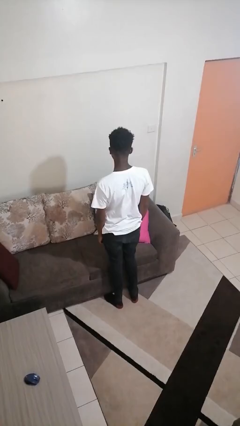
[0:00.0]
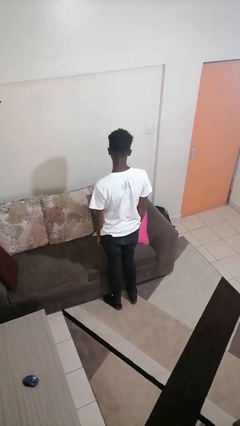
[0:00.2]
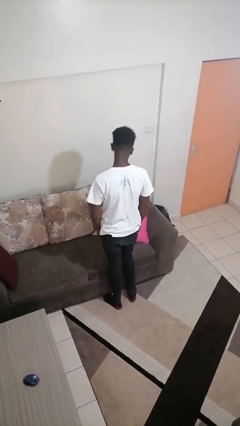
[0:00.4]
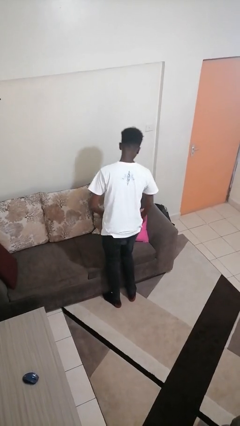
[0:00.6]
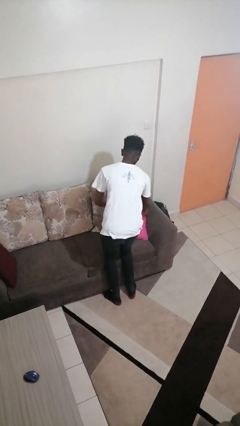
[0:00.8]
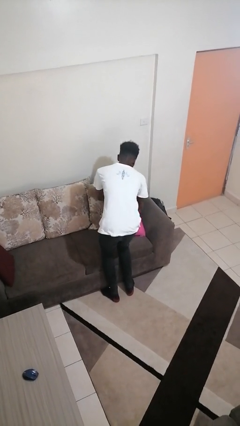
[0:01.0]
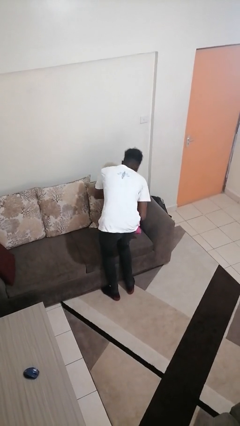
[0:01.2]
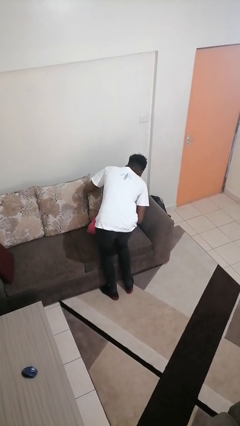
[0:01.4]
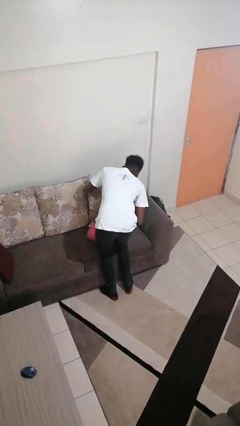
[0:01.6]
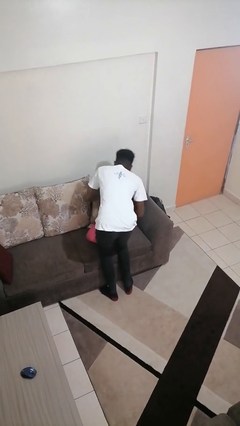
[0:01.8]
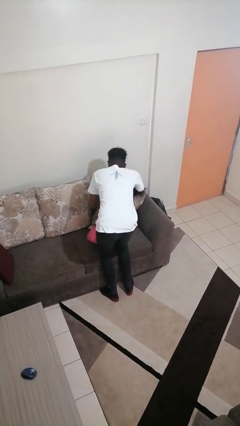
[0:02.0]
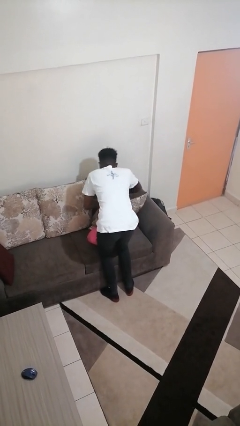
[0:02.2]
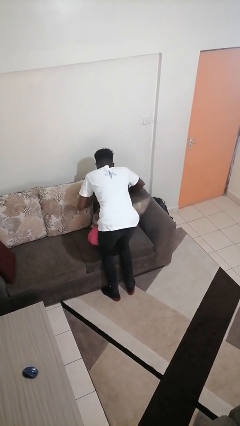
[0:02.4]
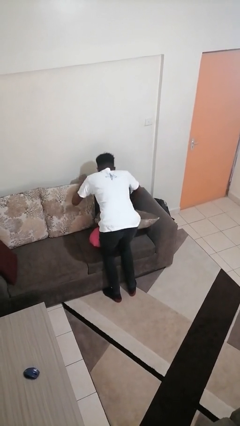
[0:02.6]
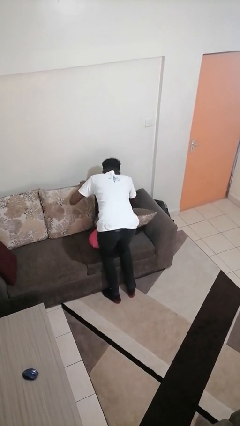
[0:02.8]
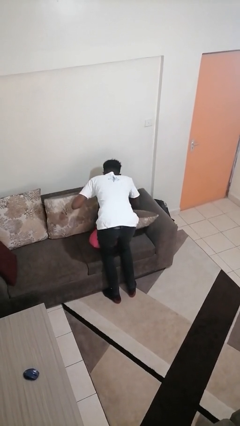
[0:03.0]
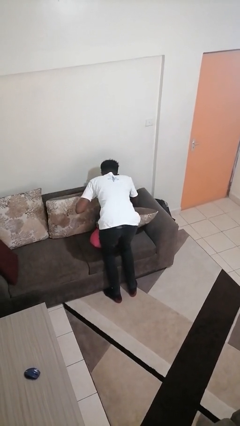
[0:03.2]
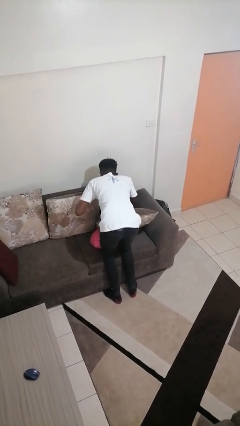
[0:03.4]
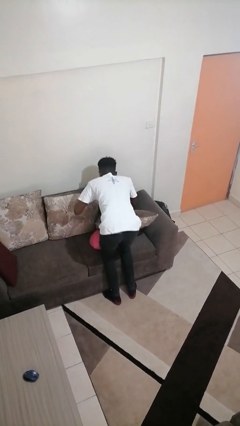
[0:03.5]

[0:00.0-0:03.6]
person searches in couch

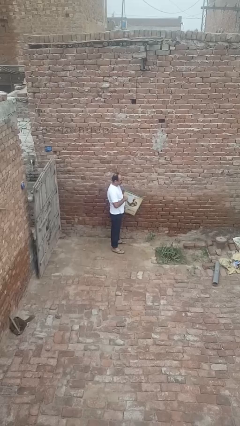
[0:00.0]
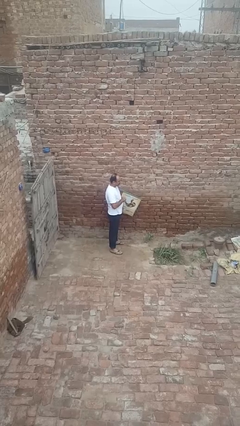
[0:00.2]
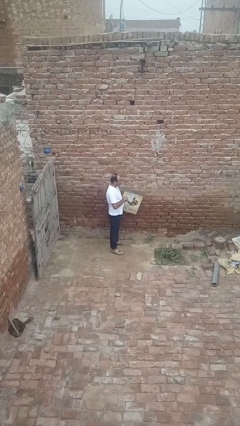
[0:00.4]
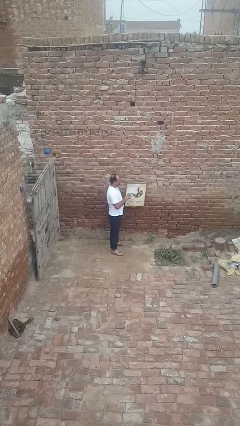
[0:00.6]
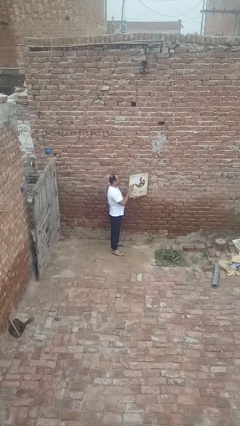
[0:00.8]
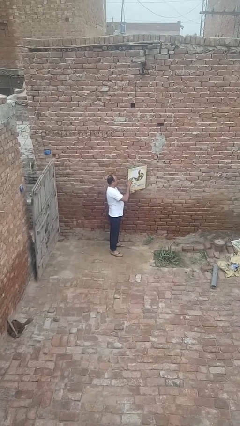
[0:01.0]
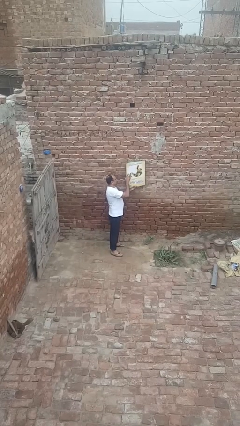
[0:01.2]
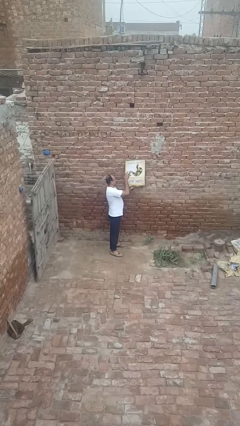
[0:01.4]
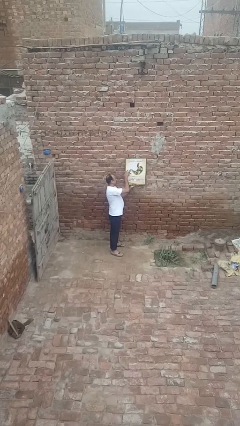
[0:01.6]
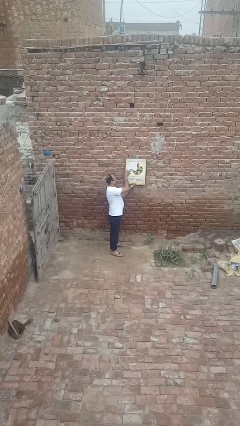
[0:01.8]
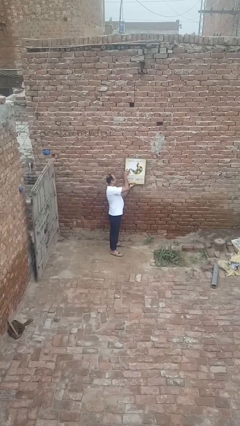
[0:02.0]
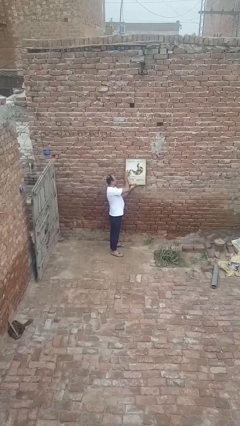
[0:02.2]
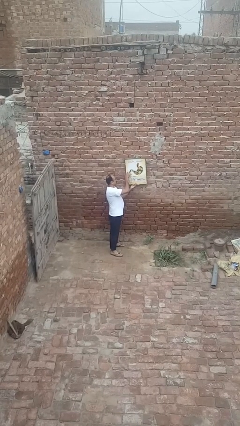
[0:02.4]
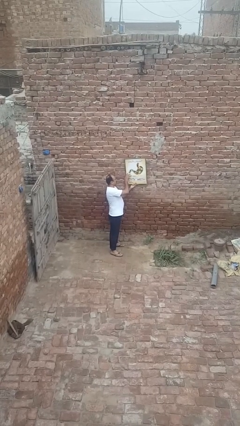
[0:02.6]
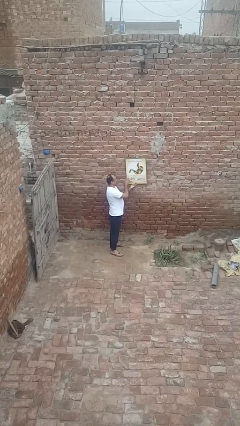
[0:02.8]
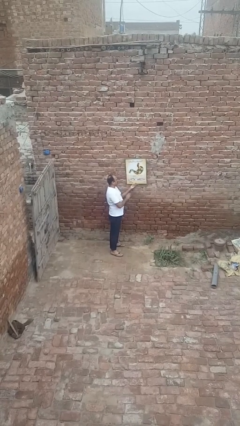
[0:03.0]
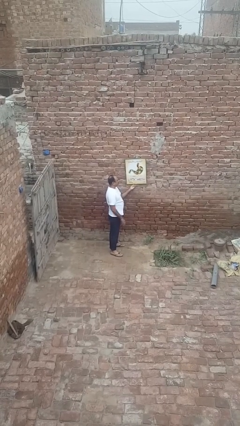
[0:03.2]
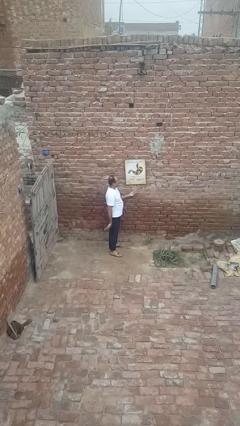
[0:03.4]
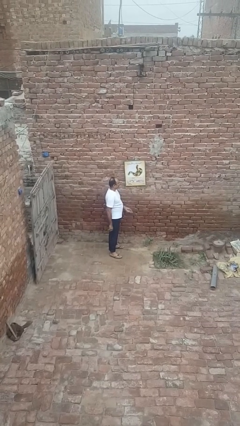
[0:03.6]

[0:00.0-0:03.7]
person puts up picture frame

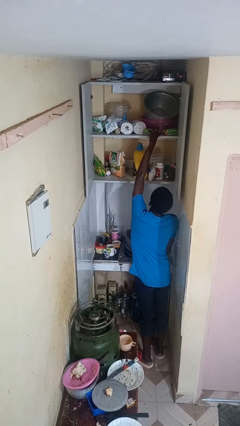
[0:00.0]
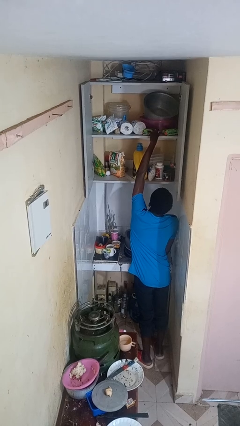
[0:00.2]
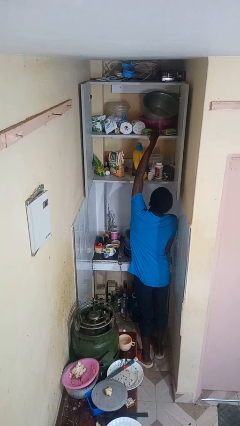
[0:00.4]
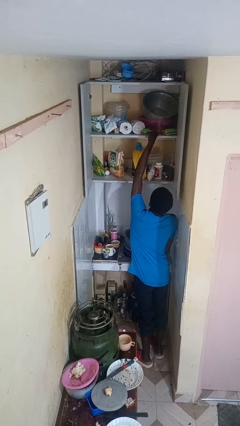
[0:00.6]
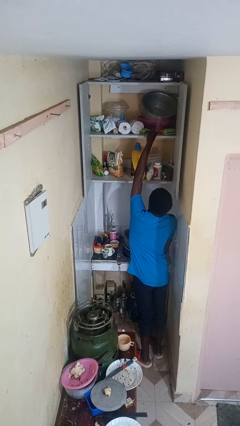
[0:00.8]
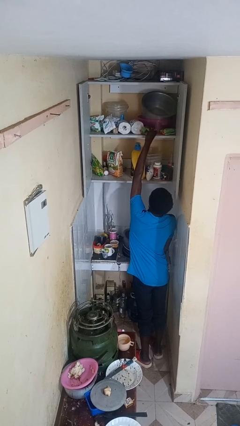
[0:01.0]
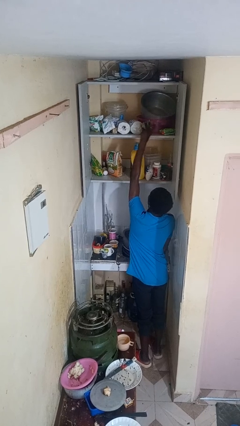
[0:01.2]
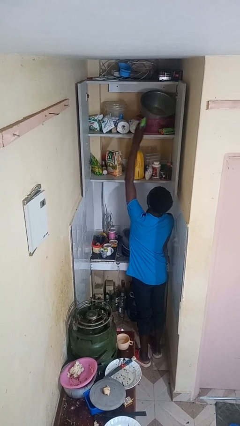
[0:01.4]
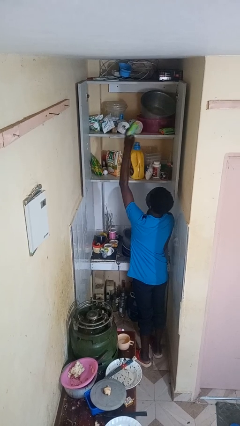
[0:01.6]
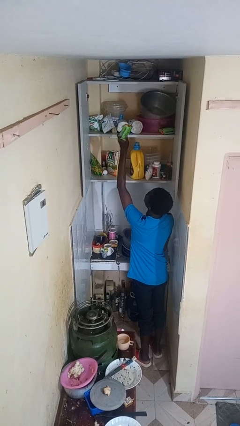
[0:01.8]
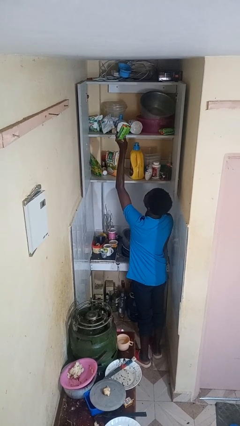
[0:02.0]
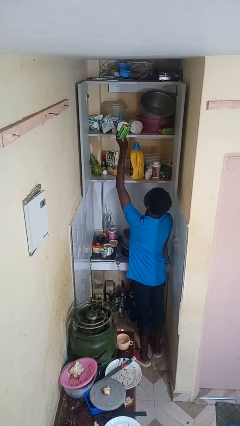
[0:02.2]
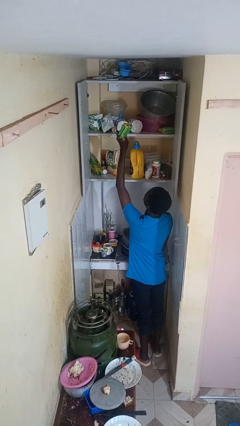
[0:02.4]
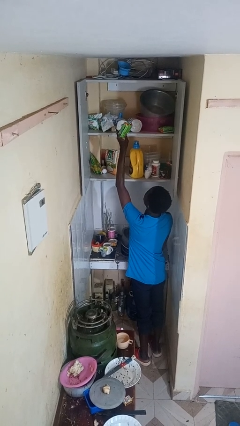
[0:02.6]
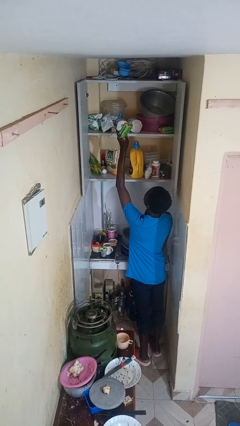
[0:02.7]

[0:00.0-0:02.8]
person takes object from cabinet

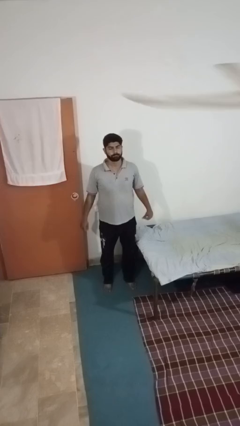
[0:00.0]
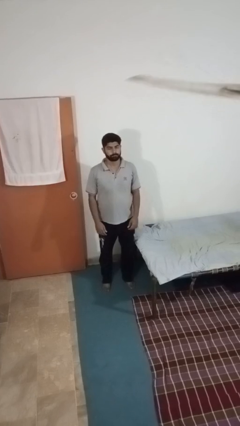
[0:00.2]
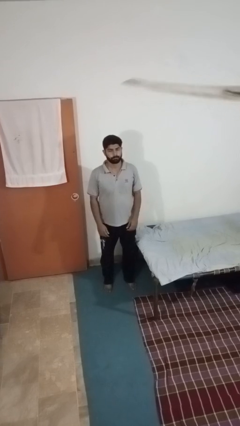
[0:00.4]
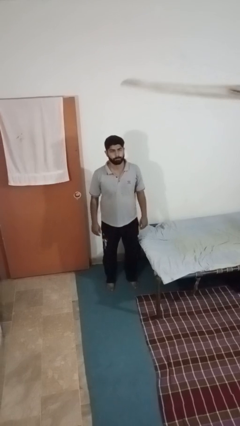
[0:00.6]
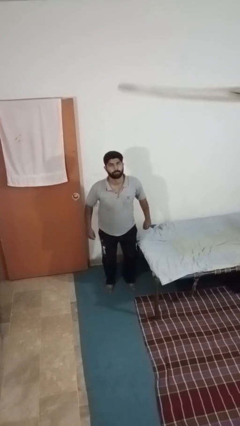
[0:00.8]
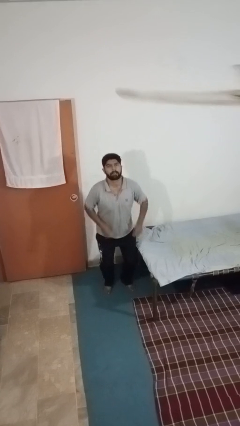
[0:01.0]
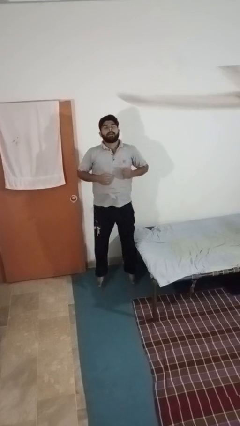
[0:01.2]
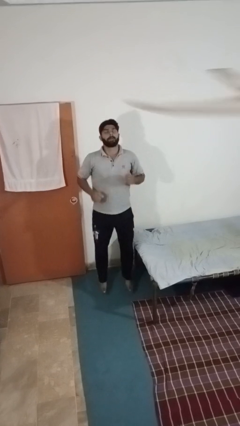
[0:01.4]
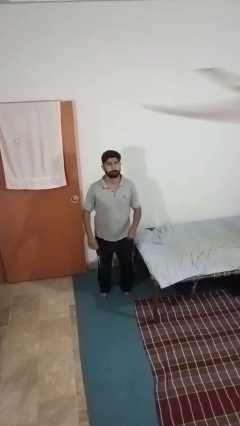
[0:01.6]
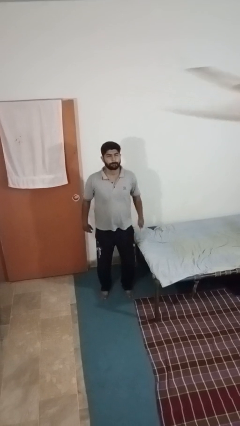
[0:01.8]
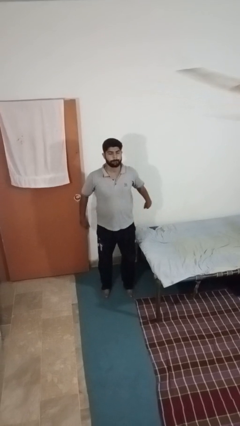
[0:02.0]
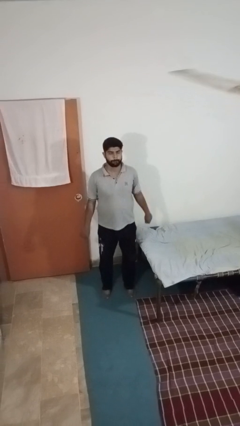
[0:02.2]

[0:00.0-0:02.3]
person jumps

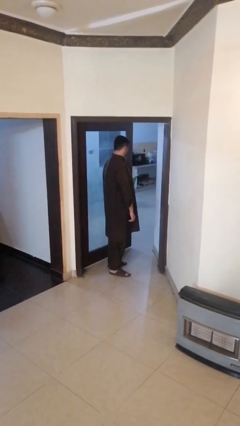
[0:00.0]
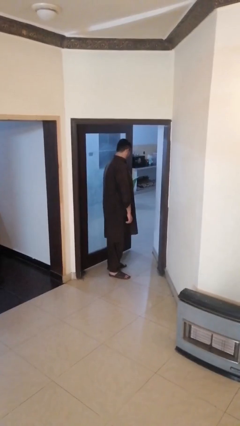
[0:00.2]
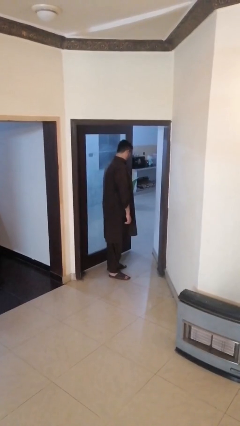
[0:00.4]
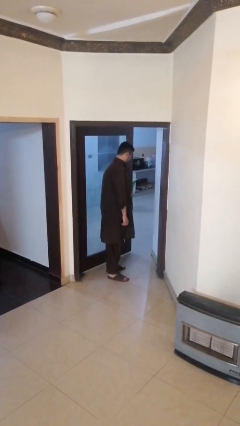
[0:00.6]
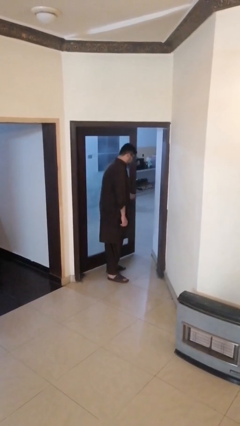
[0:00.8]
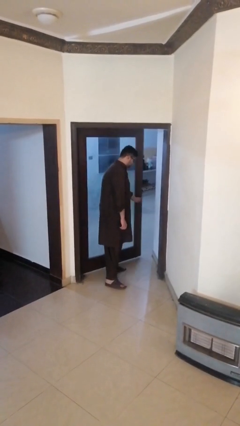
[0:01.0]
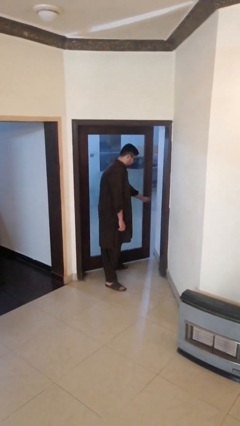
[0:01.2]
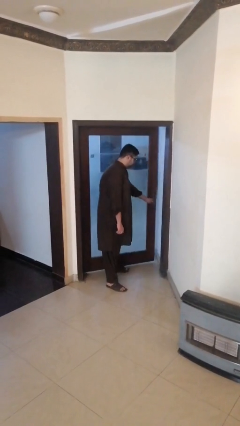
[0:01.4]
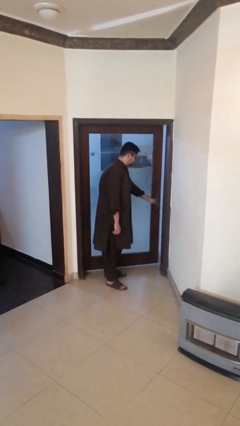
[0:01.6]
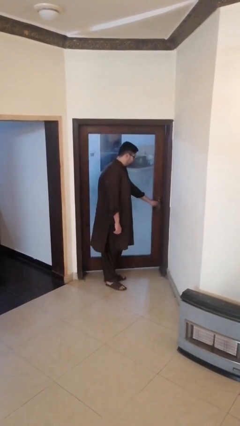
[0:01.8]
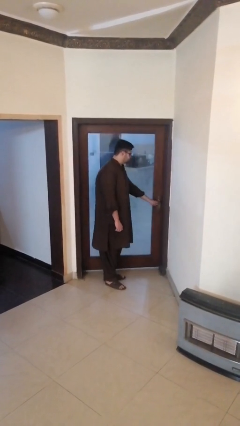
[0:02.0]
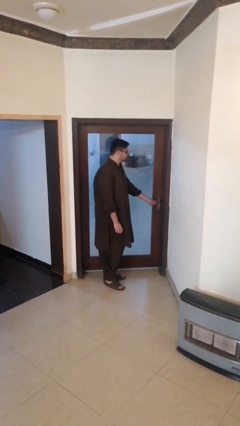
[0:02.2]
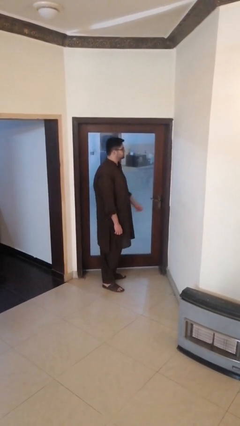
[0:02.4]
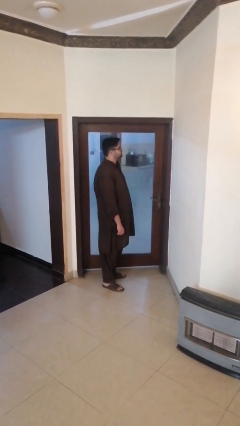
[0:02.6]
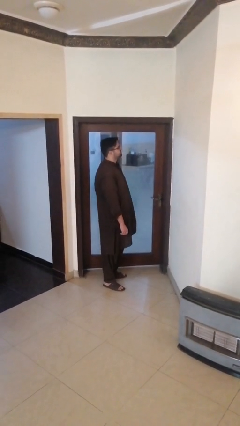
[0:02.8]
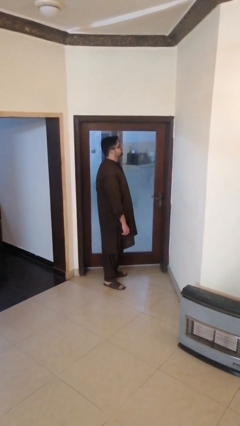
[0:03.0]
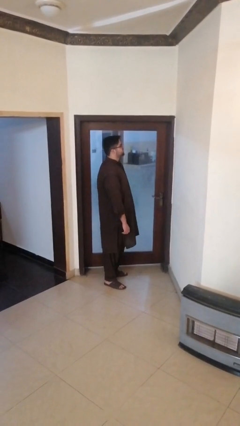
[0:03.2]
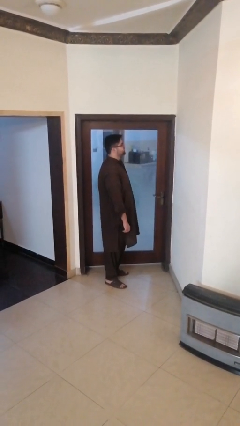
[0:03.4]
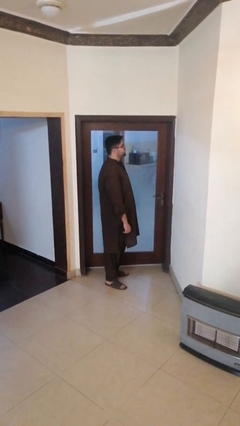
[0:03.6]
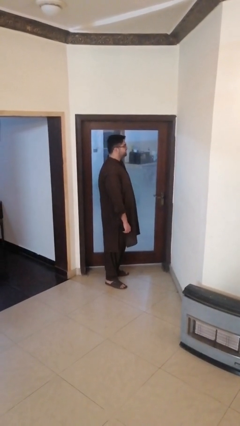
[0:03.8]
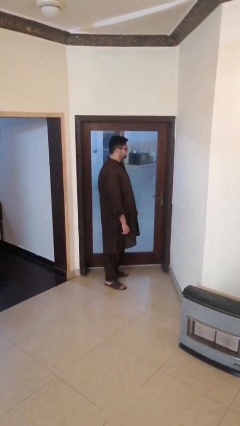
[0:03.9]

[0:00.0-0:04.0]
person closes facility door

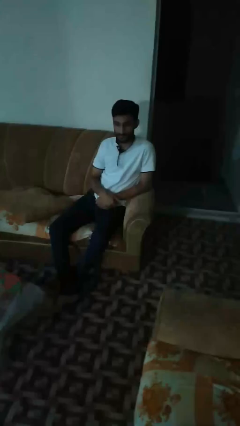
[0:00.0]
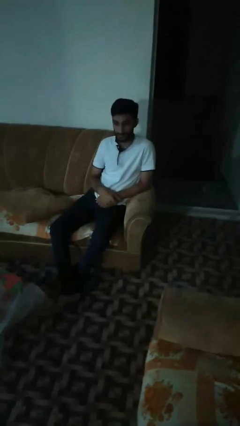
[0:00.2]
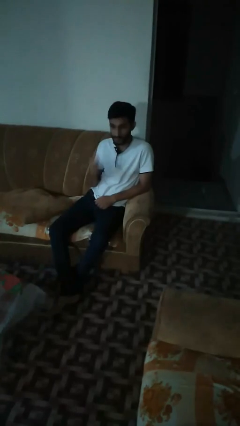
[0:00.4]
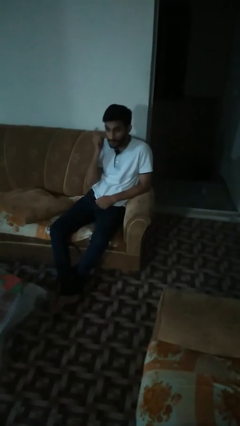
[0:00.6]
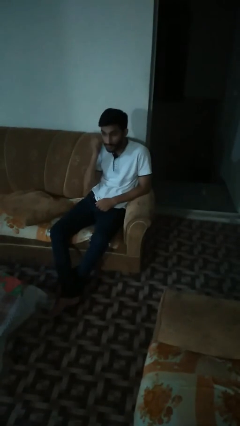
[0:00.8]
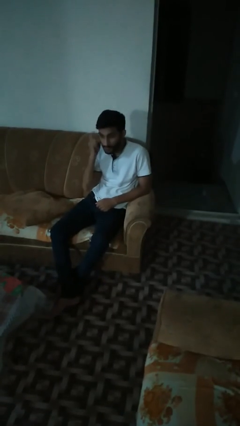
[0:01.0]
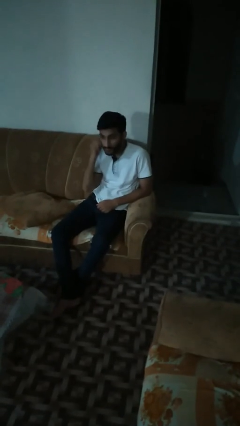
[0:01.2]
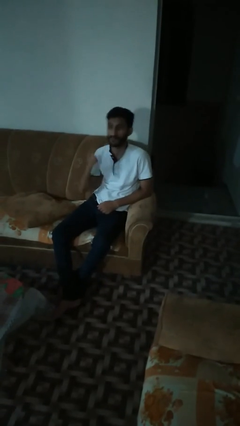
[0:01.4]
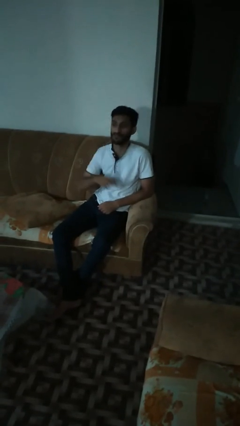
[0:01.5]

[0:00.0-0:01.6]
person gestures listen closely
